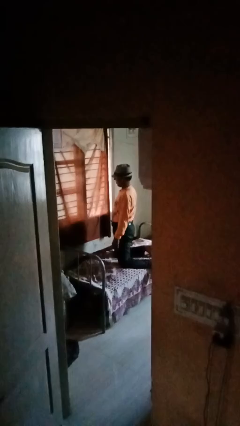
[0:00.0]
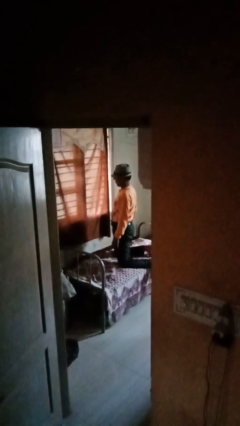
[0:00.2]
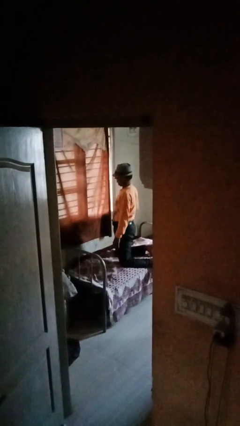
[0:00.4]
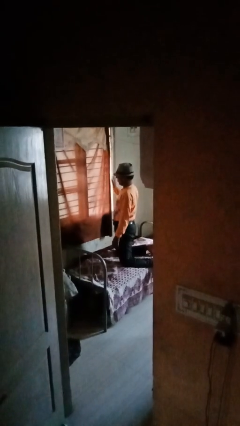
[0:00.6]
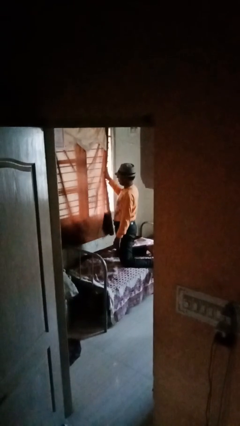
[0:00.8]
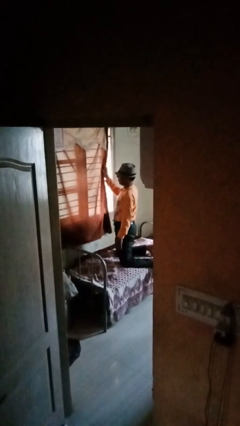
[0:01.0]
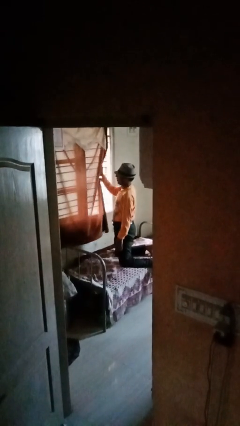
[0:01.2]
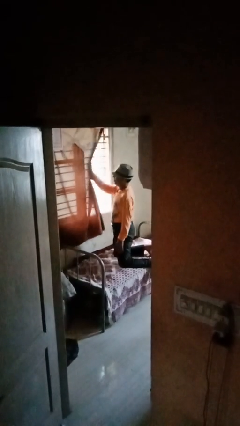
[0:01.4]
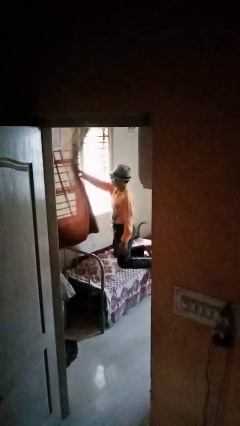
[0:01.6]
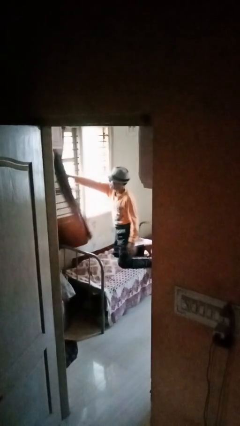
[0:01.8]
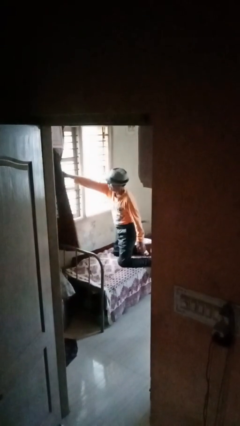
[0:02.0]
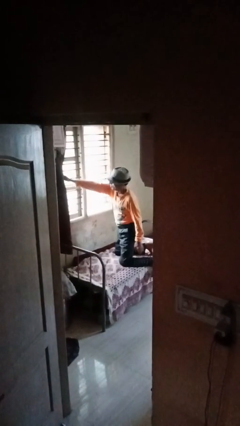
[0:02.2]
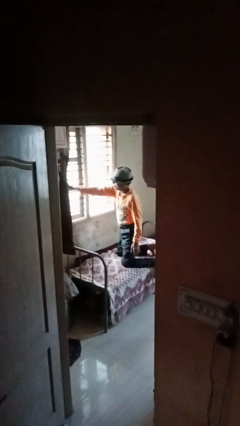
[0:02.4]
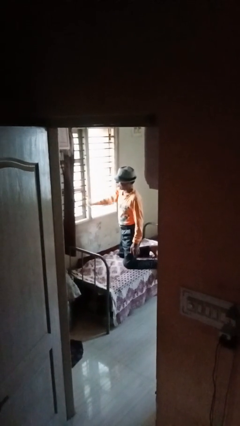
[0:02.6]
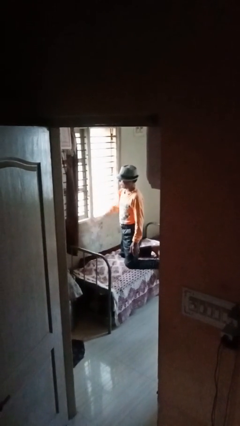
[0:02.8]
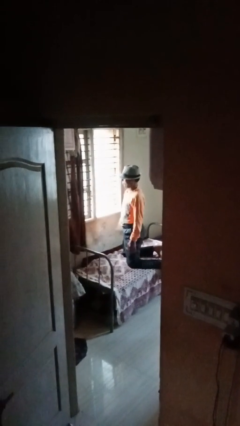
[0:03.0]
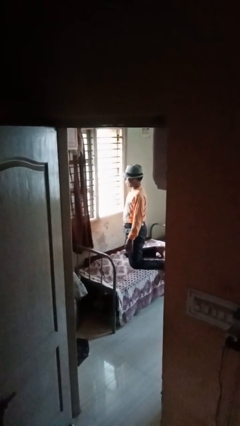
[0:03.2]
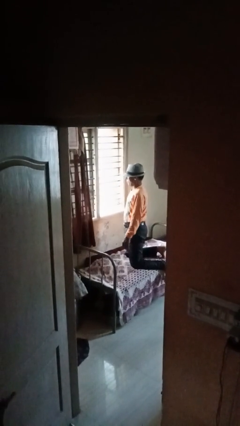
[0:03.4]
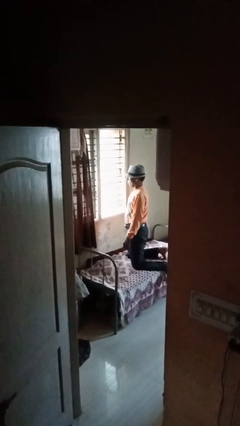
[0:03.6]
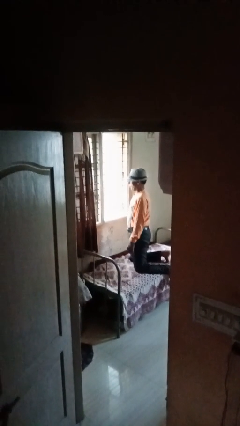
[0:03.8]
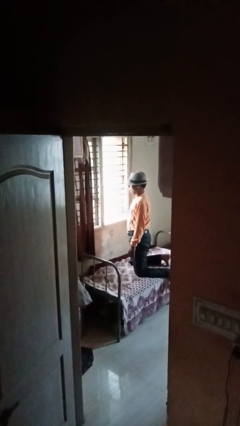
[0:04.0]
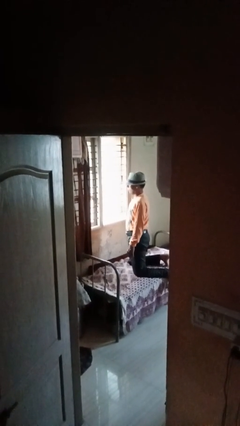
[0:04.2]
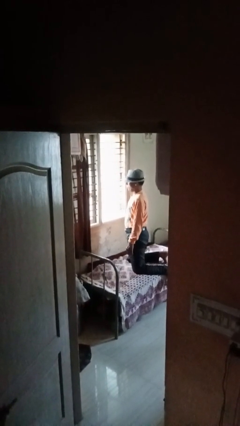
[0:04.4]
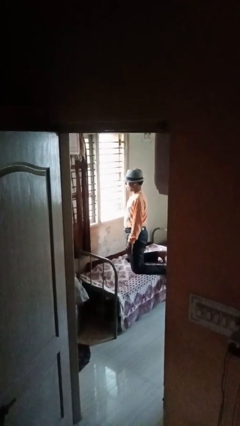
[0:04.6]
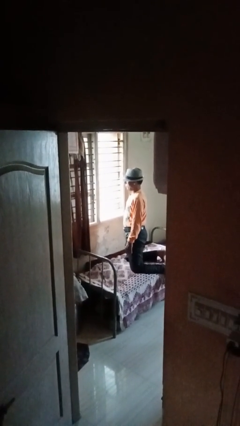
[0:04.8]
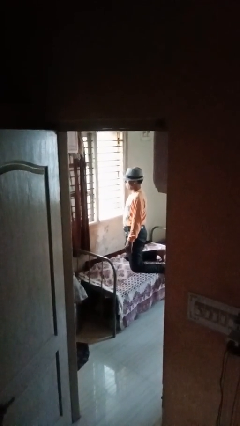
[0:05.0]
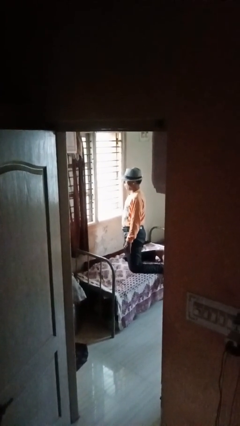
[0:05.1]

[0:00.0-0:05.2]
person opens curtains

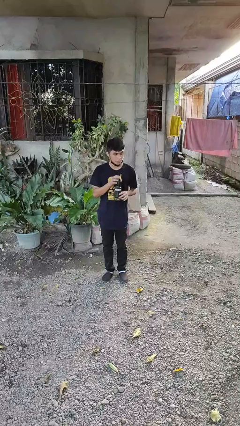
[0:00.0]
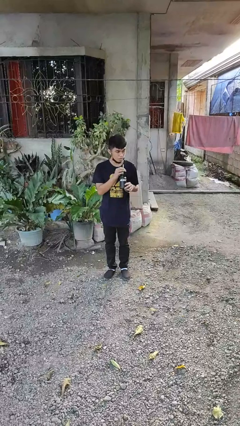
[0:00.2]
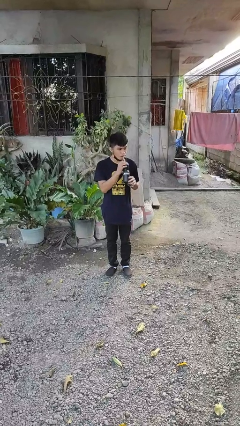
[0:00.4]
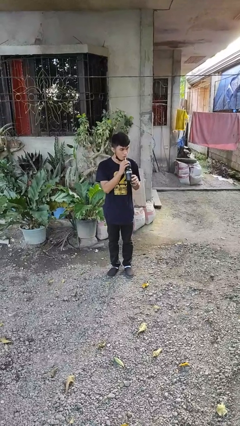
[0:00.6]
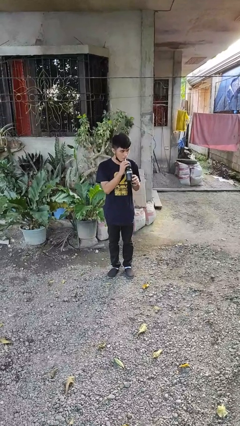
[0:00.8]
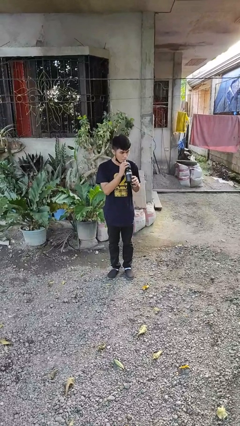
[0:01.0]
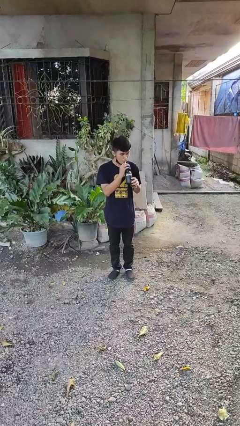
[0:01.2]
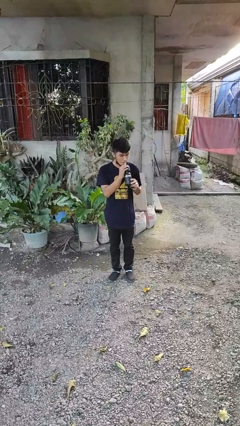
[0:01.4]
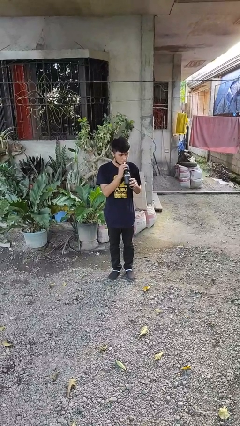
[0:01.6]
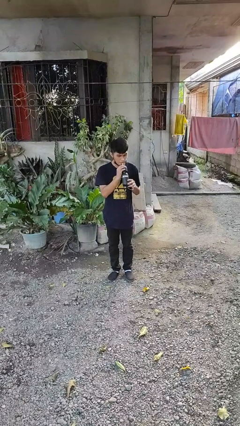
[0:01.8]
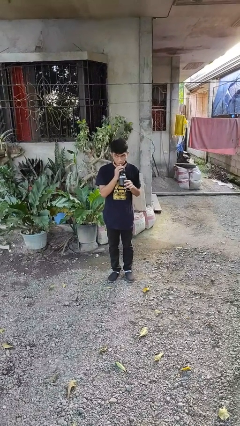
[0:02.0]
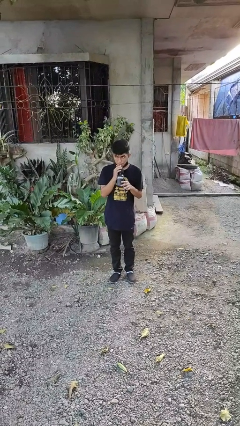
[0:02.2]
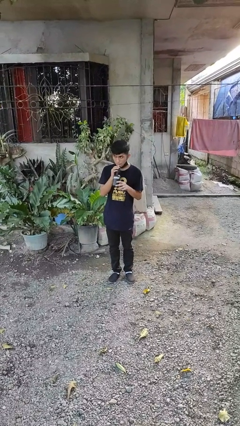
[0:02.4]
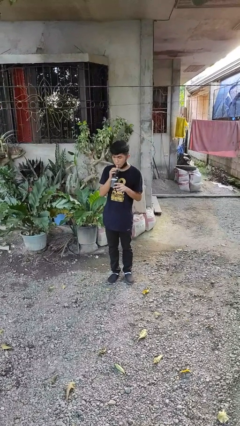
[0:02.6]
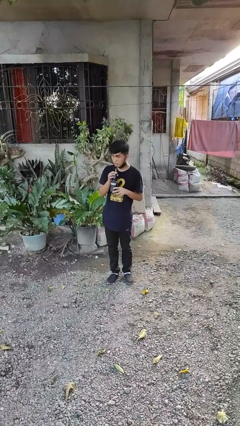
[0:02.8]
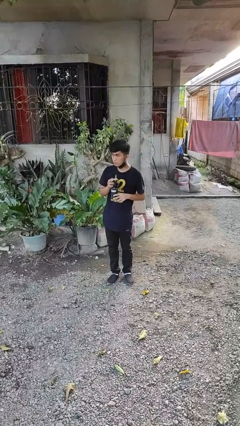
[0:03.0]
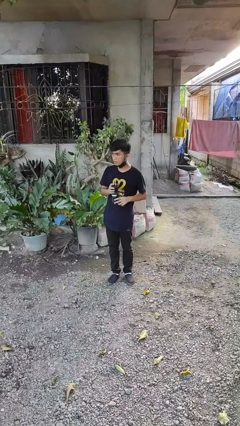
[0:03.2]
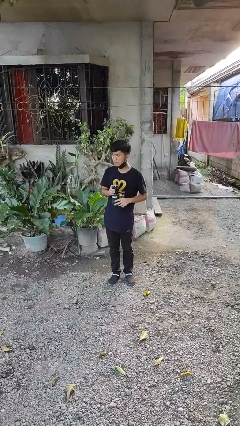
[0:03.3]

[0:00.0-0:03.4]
person drinks from straw

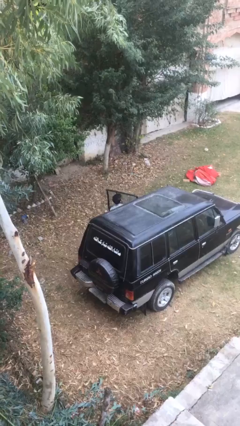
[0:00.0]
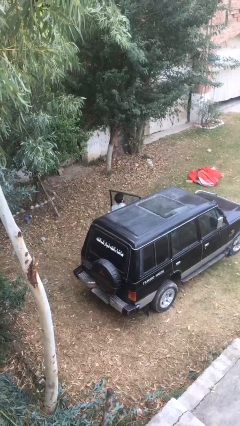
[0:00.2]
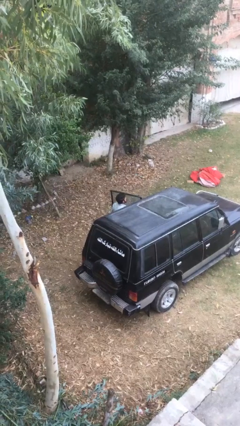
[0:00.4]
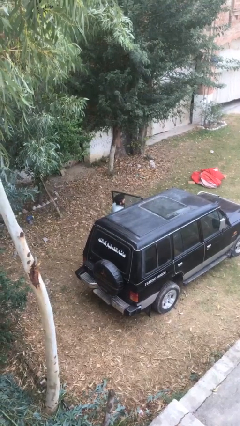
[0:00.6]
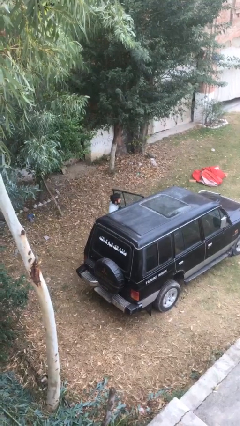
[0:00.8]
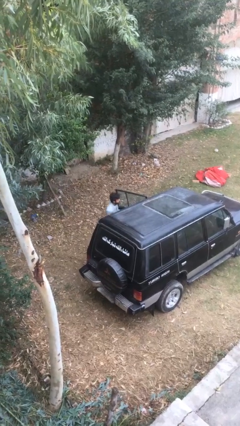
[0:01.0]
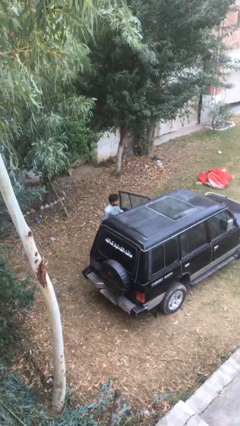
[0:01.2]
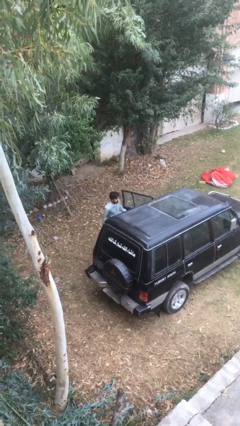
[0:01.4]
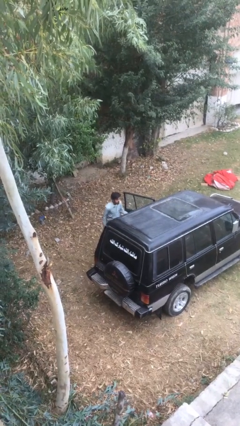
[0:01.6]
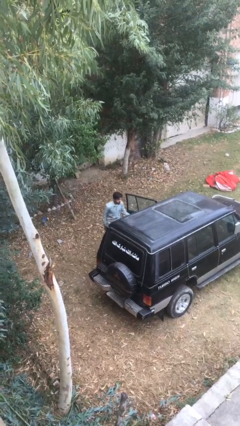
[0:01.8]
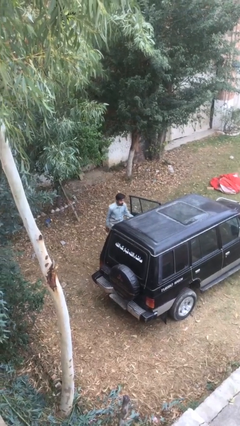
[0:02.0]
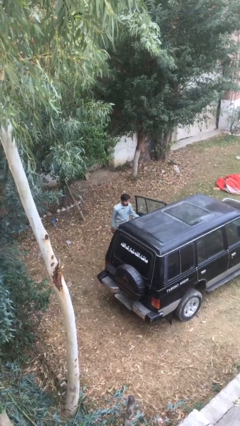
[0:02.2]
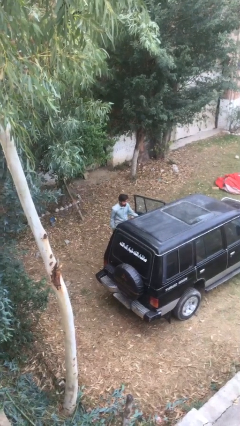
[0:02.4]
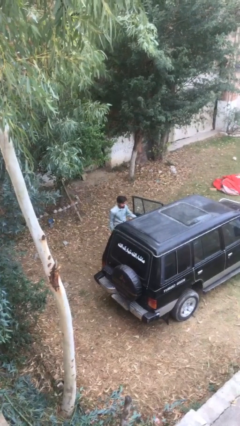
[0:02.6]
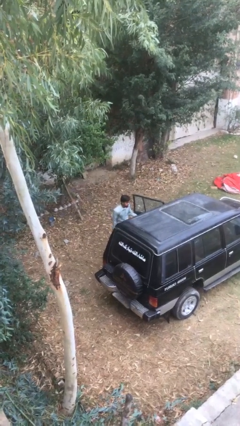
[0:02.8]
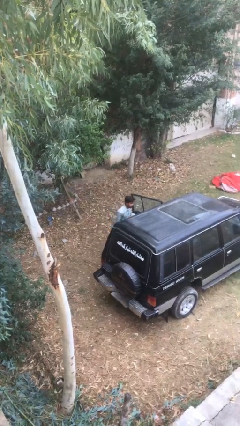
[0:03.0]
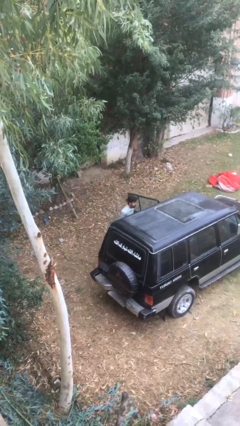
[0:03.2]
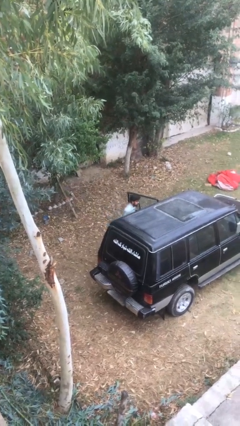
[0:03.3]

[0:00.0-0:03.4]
person exits car

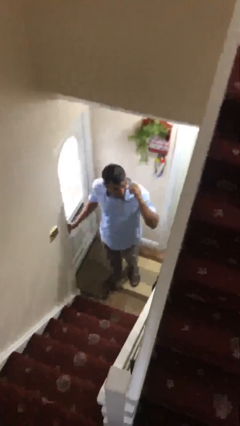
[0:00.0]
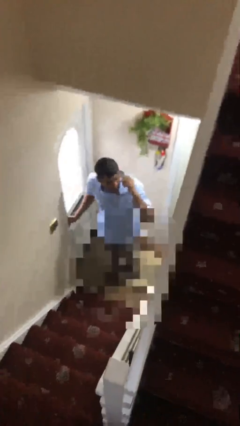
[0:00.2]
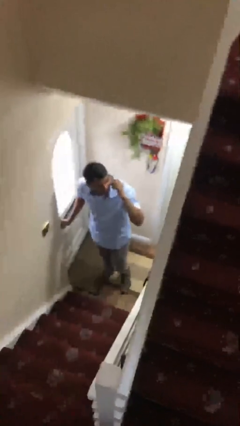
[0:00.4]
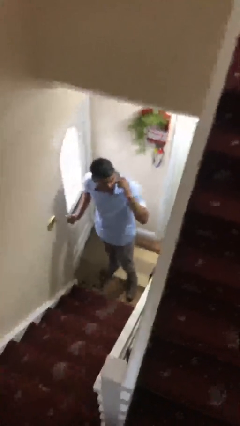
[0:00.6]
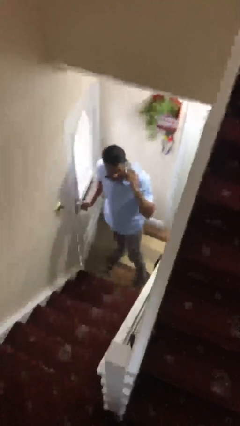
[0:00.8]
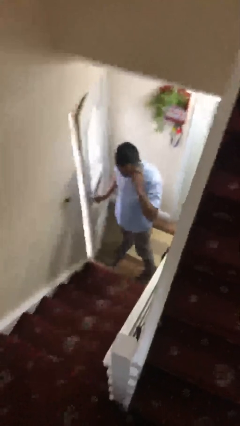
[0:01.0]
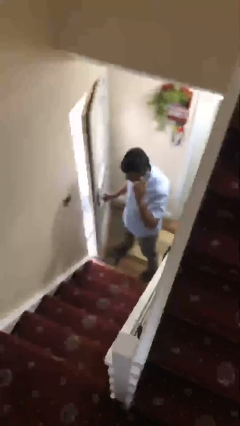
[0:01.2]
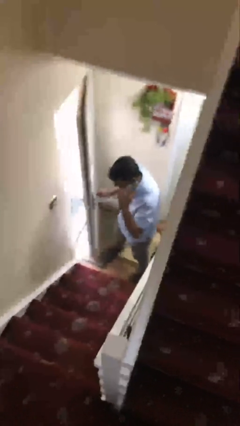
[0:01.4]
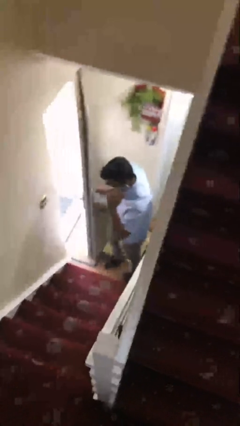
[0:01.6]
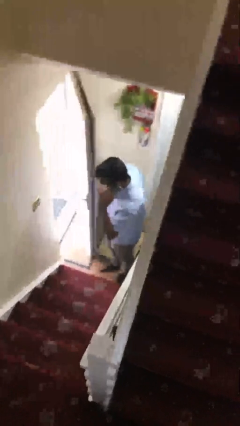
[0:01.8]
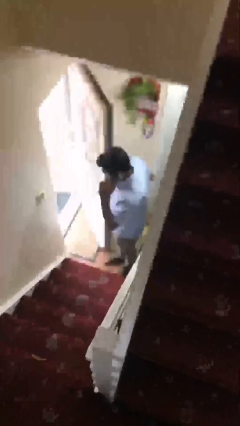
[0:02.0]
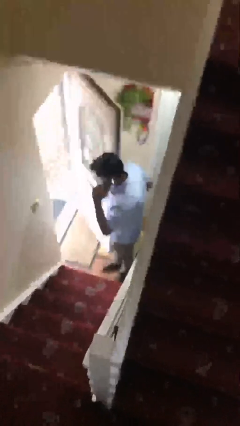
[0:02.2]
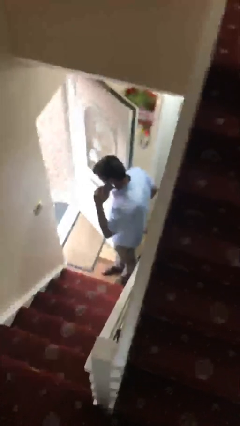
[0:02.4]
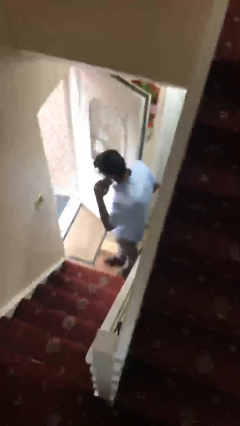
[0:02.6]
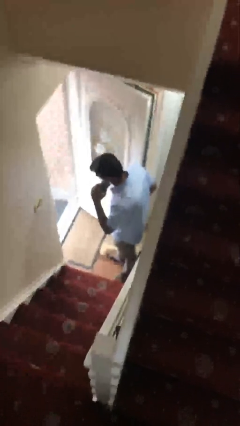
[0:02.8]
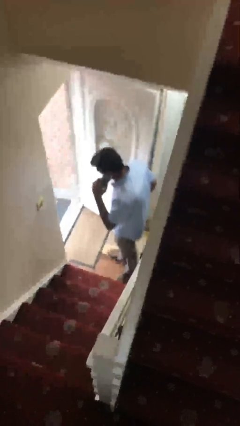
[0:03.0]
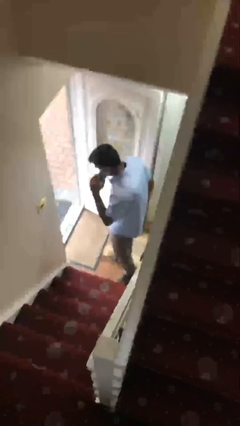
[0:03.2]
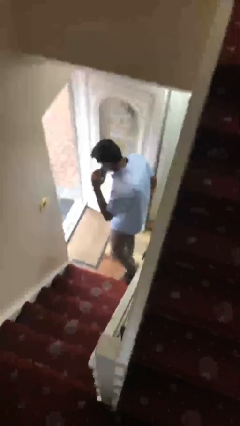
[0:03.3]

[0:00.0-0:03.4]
person opens facility door

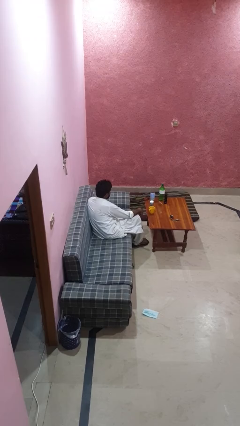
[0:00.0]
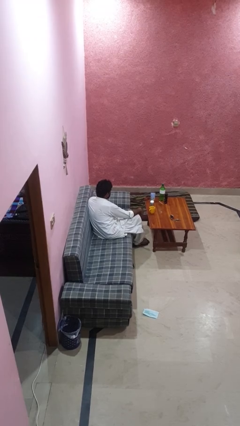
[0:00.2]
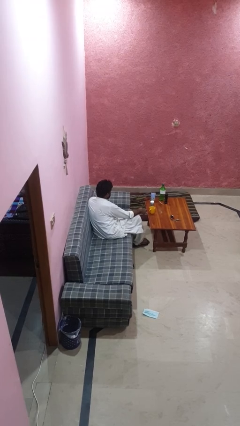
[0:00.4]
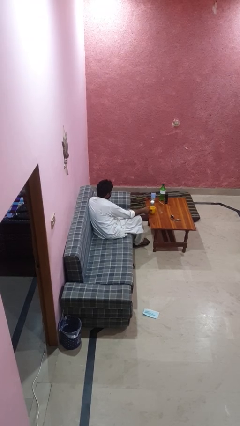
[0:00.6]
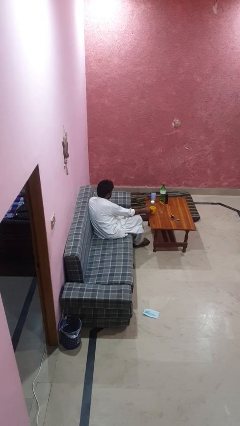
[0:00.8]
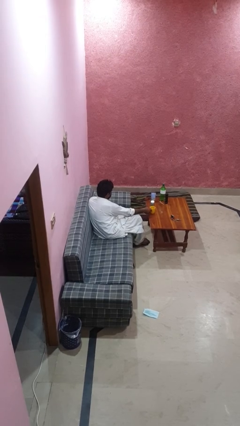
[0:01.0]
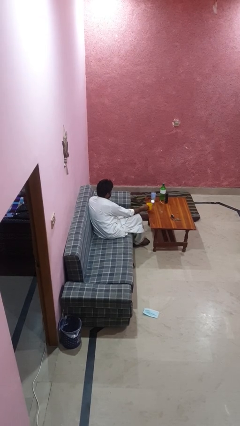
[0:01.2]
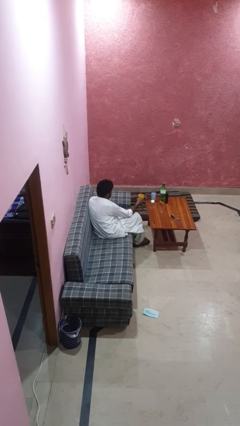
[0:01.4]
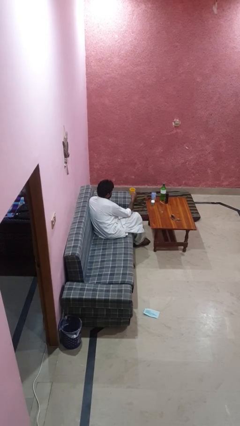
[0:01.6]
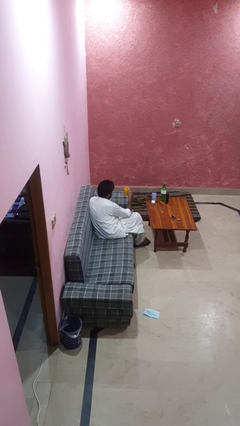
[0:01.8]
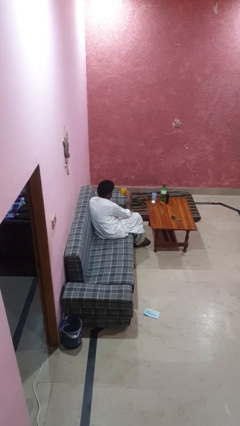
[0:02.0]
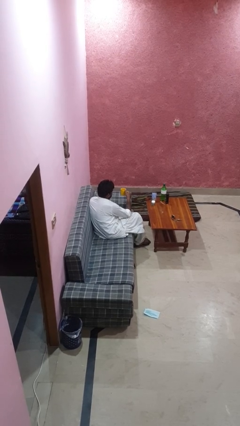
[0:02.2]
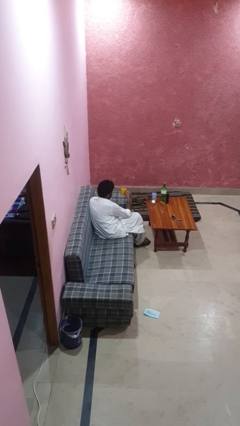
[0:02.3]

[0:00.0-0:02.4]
person picks up object from table
